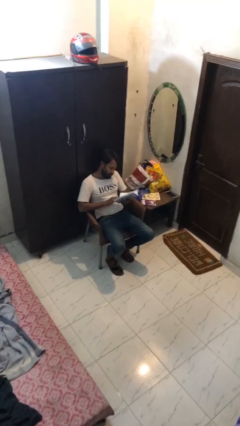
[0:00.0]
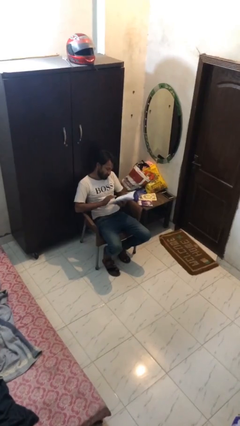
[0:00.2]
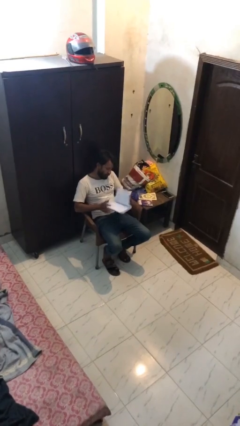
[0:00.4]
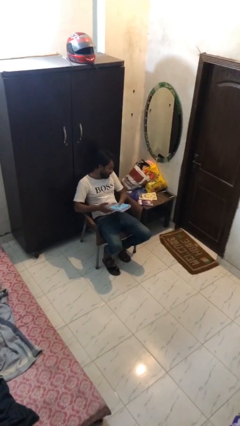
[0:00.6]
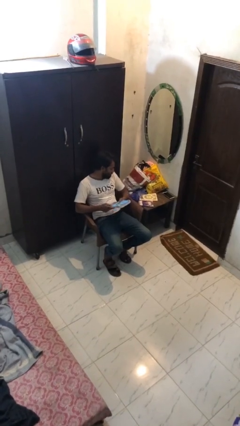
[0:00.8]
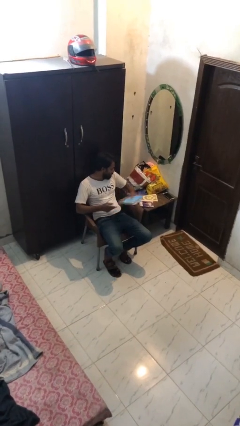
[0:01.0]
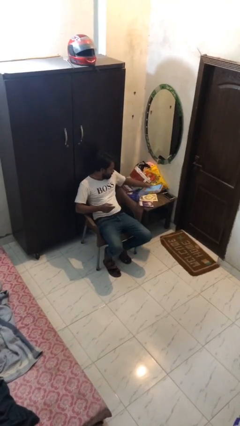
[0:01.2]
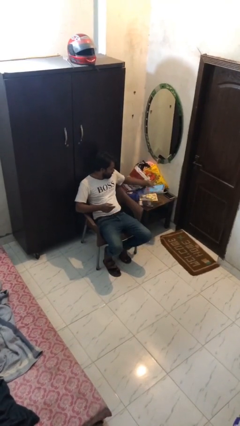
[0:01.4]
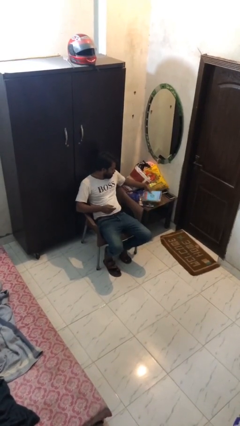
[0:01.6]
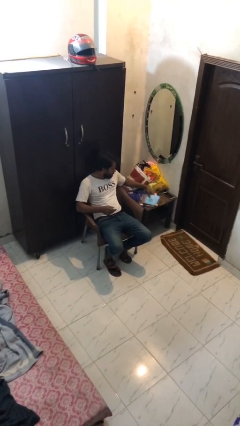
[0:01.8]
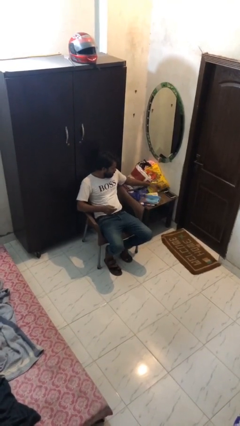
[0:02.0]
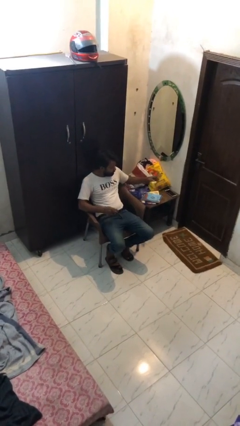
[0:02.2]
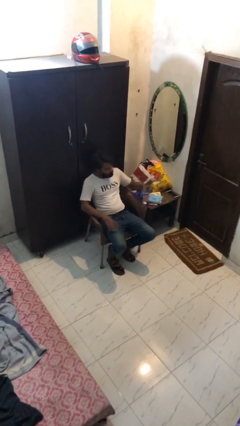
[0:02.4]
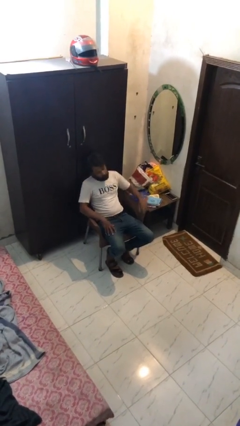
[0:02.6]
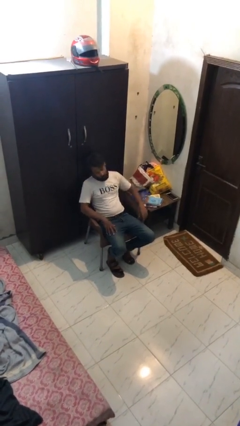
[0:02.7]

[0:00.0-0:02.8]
person puts down object on table

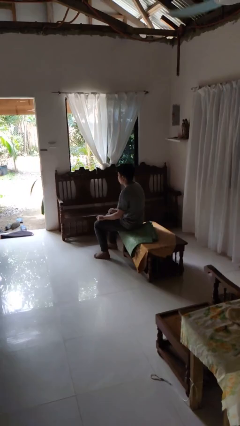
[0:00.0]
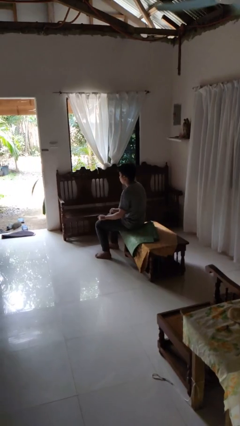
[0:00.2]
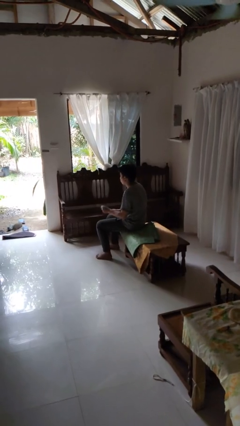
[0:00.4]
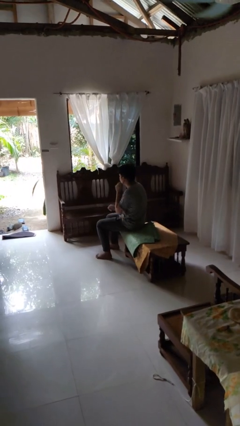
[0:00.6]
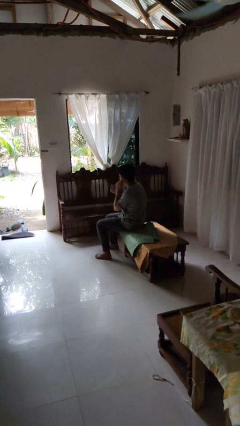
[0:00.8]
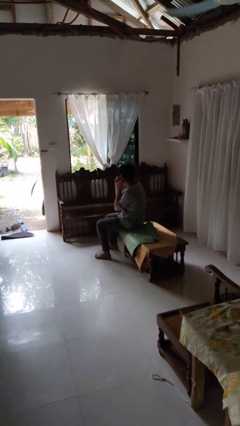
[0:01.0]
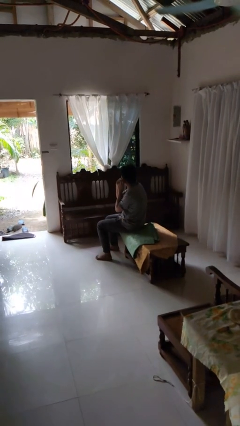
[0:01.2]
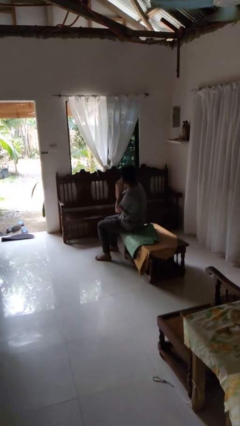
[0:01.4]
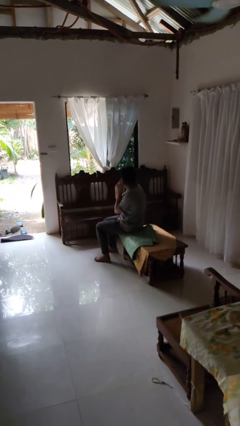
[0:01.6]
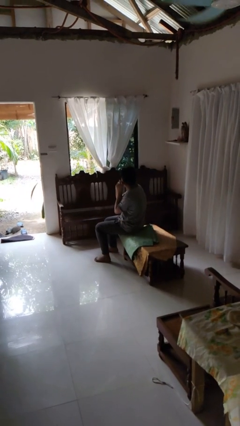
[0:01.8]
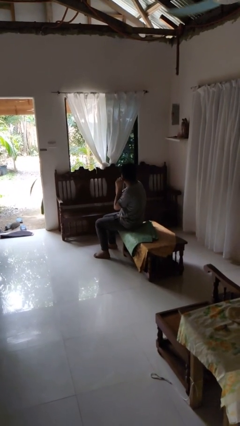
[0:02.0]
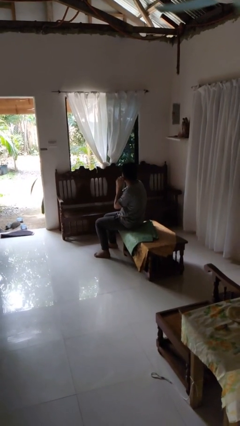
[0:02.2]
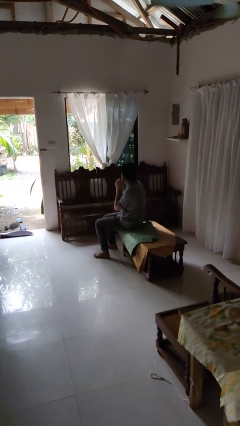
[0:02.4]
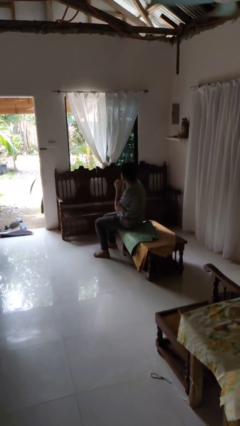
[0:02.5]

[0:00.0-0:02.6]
person puts on earrings

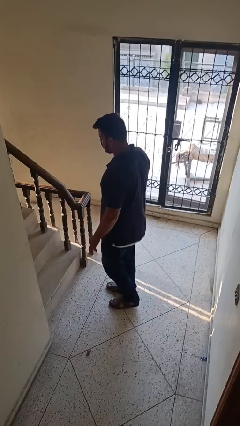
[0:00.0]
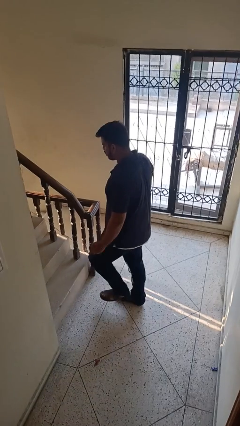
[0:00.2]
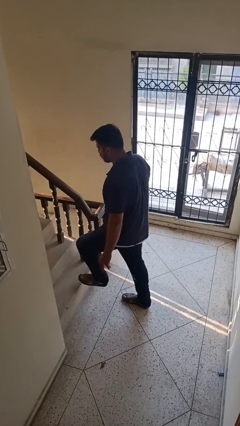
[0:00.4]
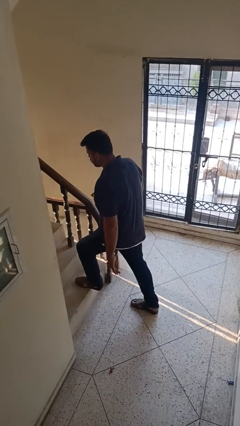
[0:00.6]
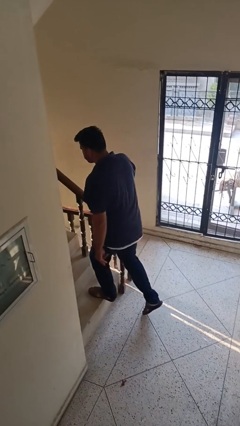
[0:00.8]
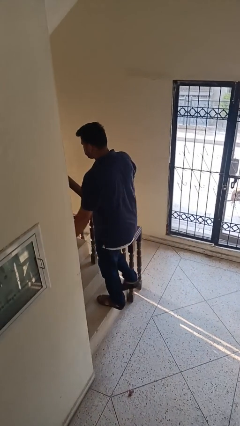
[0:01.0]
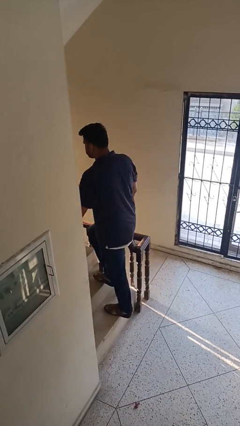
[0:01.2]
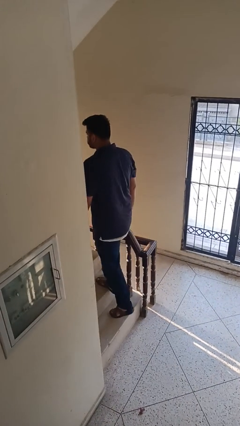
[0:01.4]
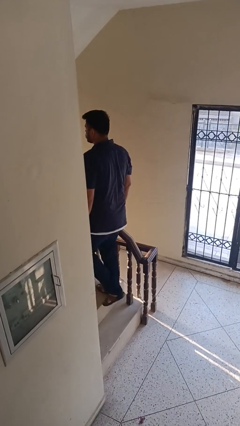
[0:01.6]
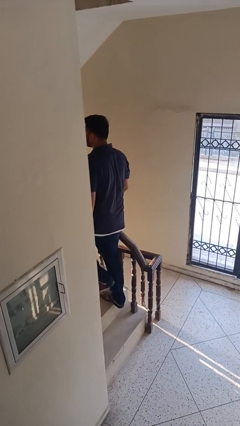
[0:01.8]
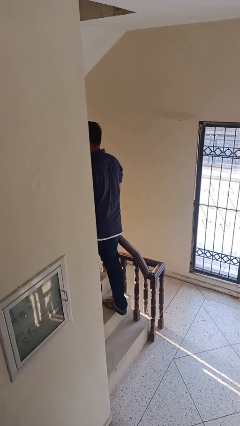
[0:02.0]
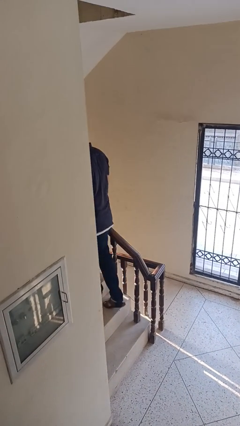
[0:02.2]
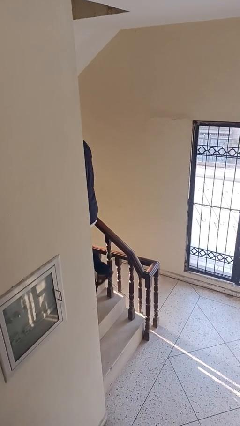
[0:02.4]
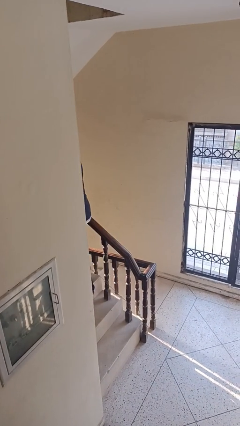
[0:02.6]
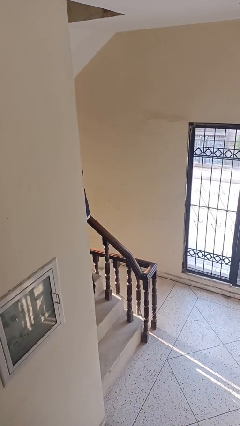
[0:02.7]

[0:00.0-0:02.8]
person climbs up stairs

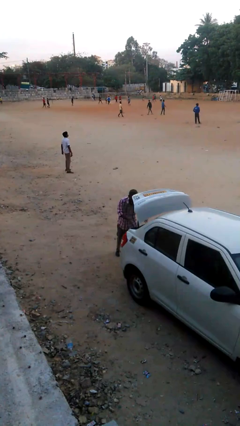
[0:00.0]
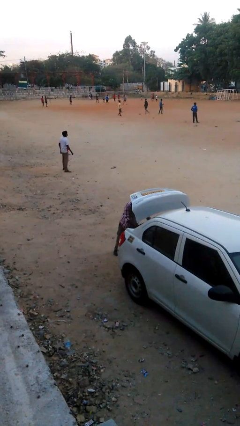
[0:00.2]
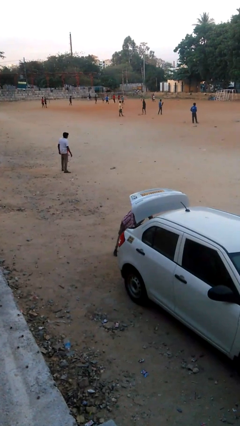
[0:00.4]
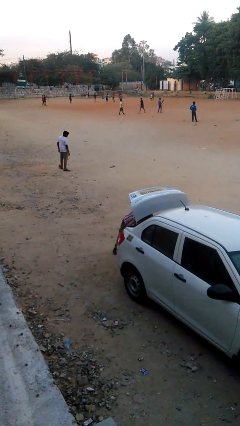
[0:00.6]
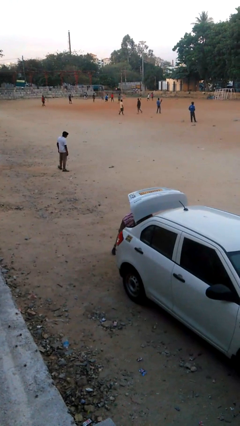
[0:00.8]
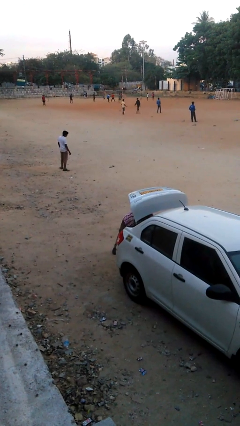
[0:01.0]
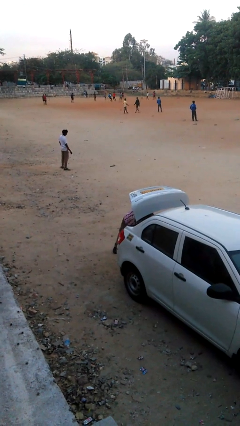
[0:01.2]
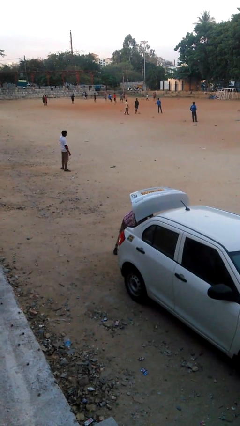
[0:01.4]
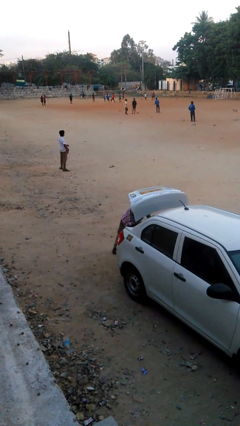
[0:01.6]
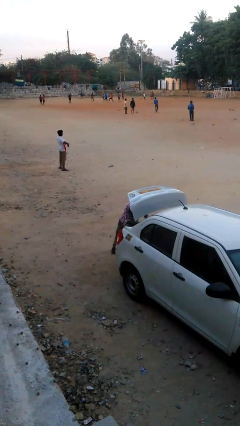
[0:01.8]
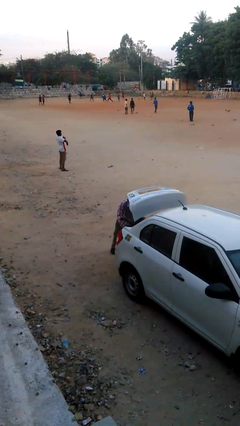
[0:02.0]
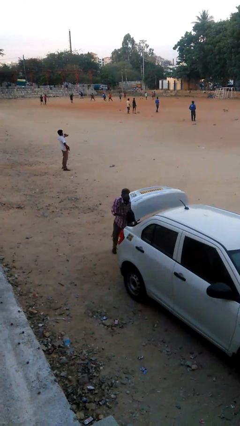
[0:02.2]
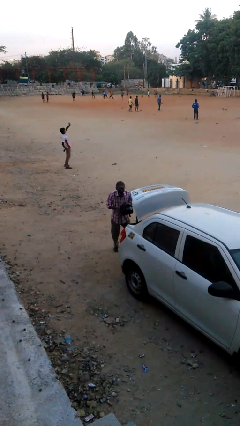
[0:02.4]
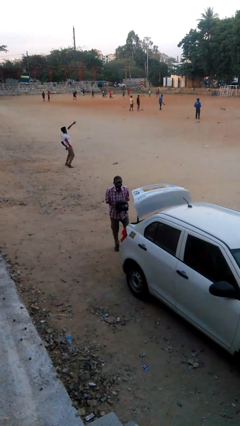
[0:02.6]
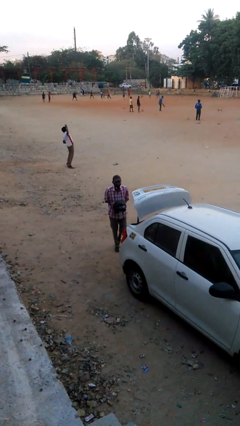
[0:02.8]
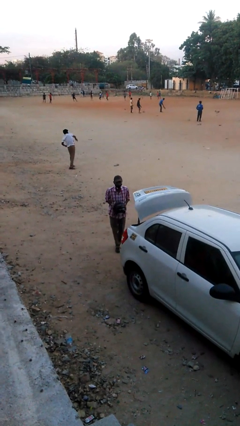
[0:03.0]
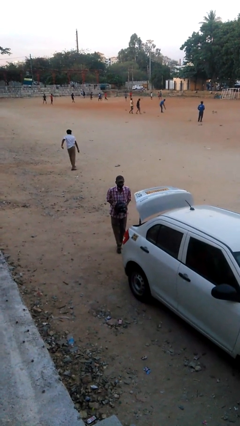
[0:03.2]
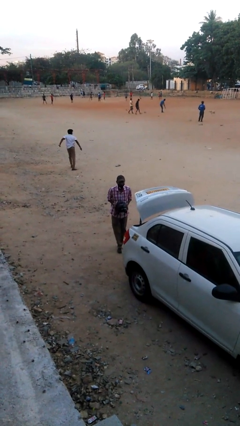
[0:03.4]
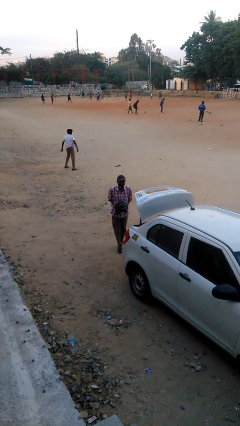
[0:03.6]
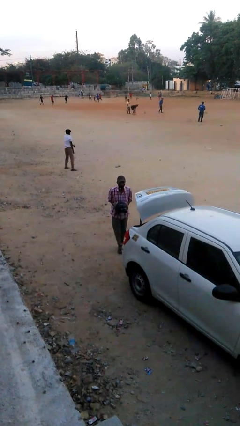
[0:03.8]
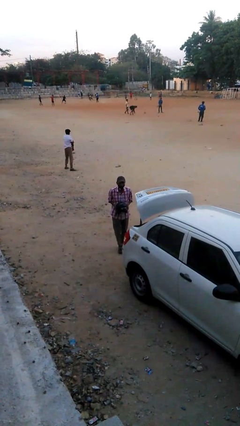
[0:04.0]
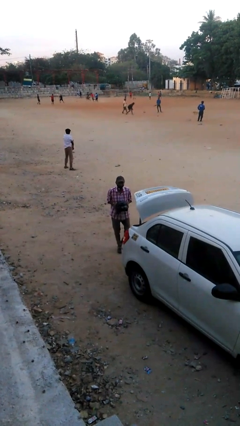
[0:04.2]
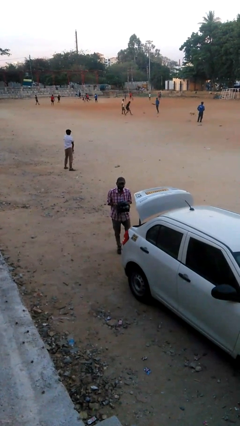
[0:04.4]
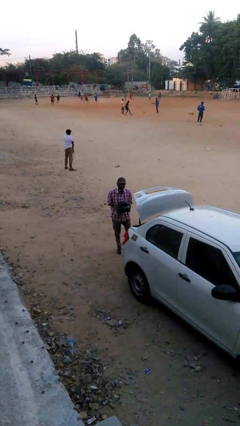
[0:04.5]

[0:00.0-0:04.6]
person unloads car

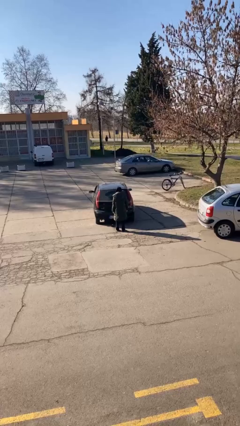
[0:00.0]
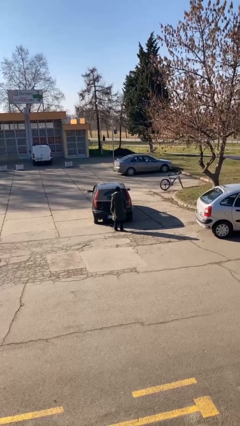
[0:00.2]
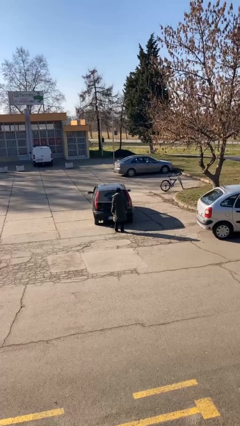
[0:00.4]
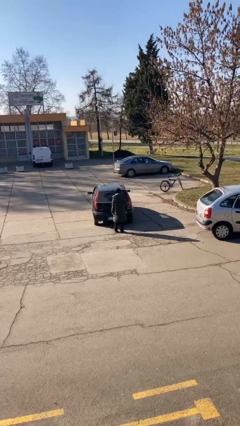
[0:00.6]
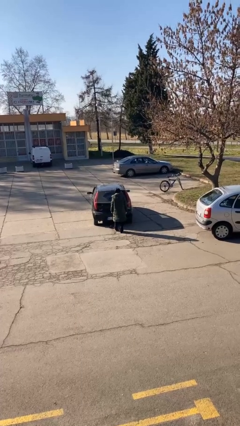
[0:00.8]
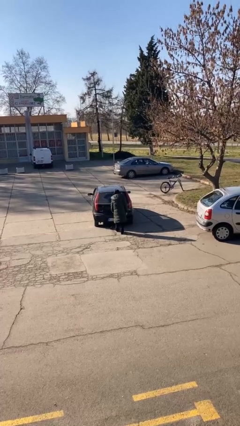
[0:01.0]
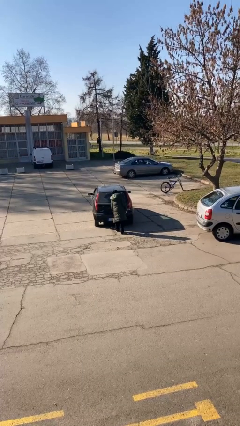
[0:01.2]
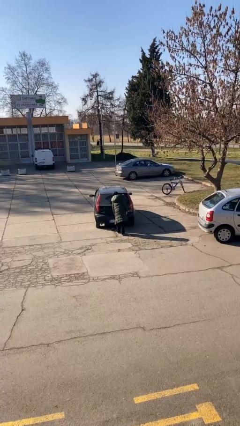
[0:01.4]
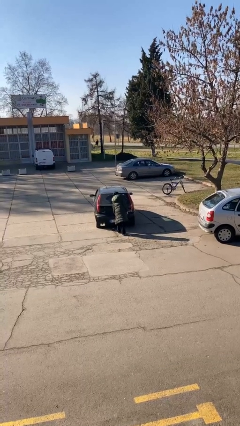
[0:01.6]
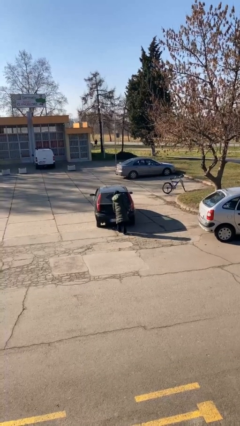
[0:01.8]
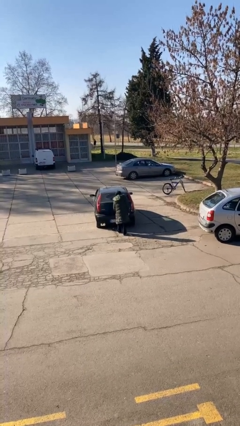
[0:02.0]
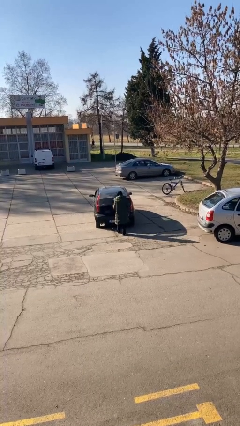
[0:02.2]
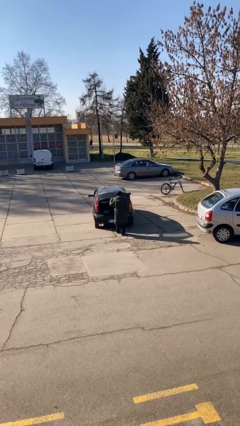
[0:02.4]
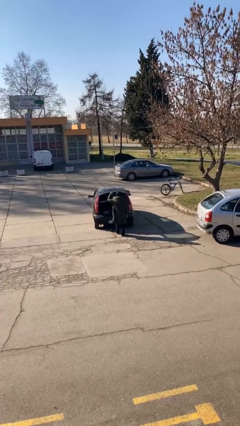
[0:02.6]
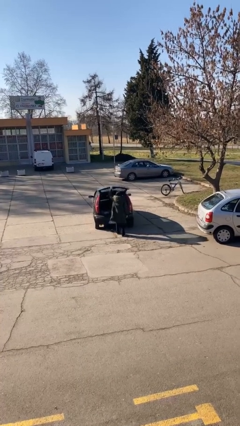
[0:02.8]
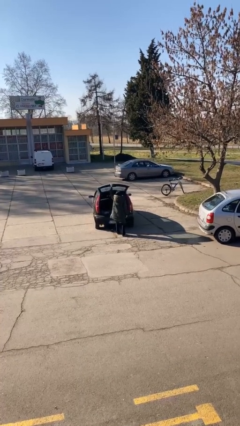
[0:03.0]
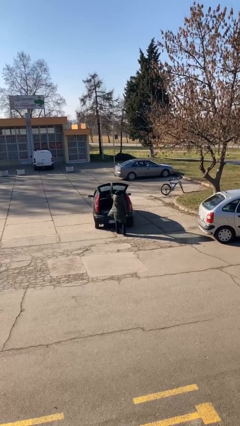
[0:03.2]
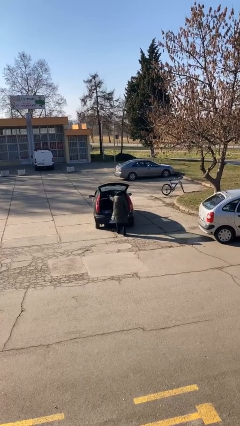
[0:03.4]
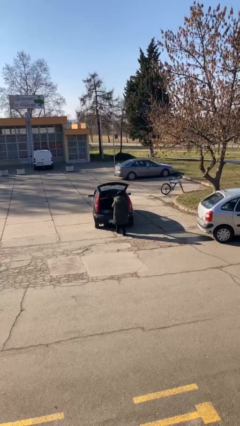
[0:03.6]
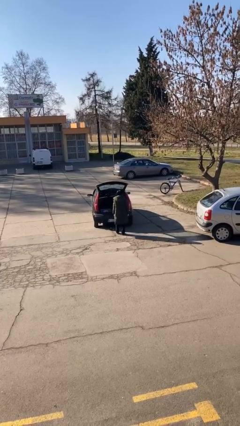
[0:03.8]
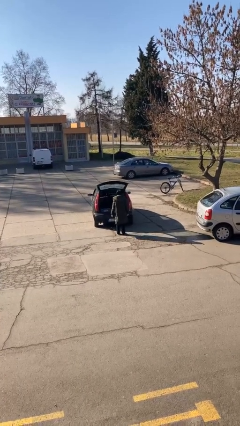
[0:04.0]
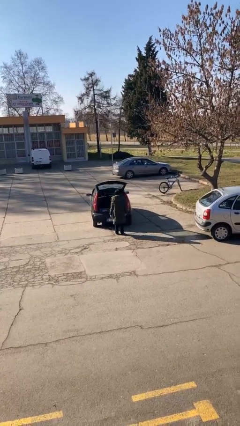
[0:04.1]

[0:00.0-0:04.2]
person opens car trunk

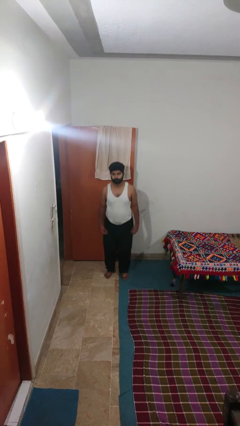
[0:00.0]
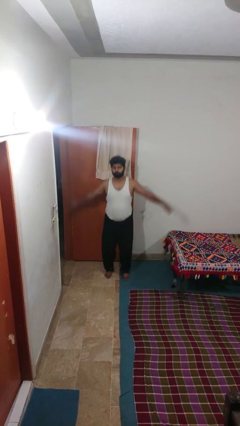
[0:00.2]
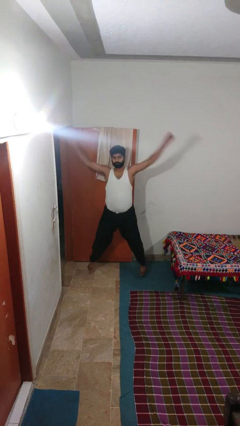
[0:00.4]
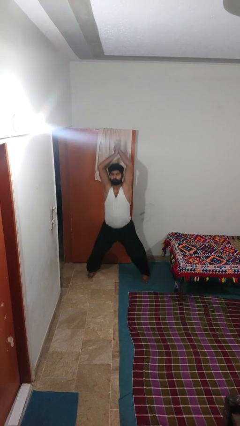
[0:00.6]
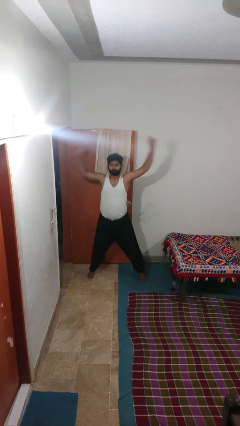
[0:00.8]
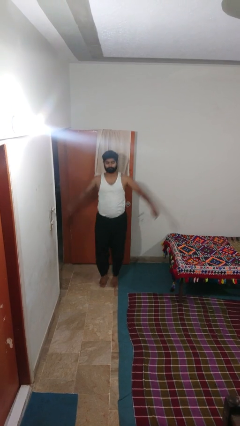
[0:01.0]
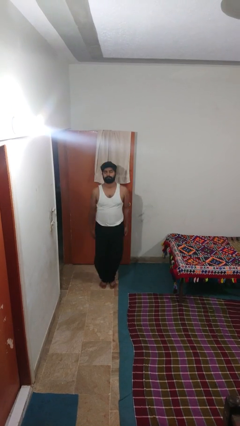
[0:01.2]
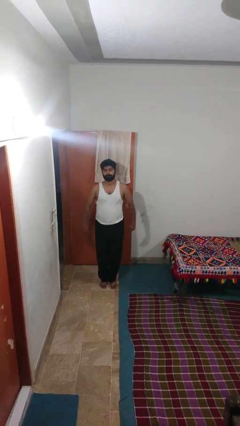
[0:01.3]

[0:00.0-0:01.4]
person exercises with jumping jacks
